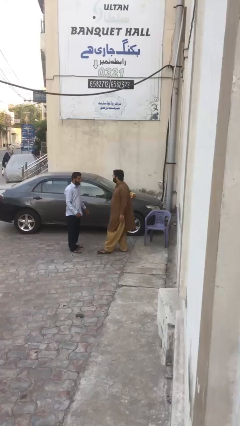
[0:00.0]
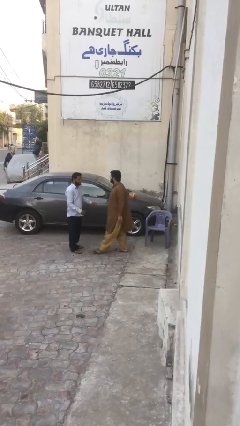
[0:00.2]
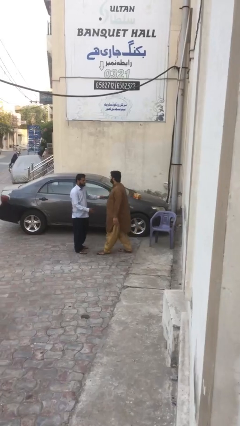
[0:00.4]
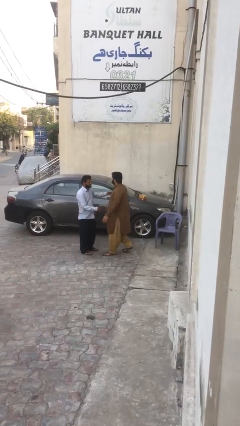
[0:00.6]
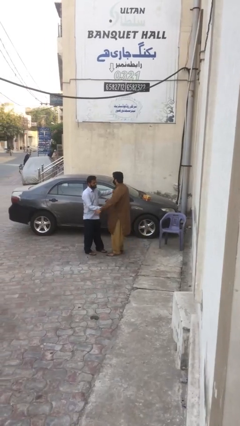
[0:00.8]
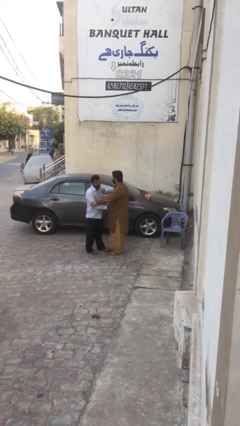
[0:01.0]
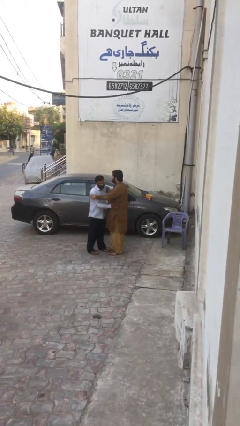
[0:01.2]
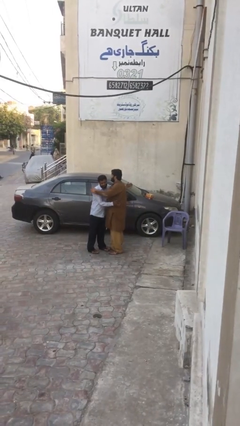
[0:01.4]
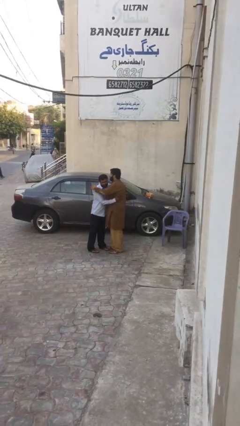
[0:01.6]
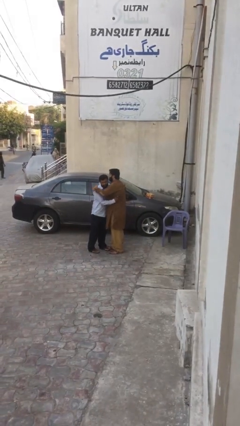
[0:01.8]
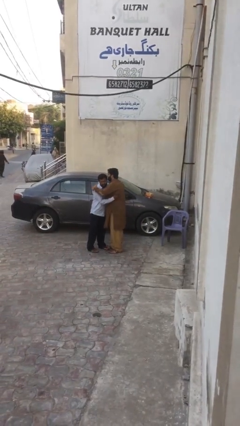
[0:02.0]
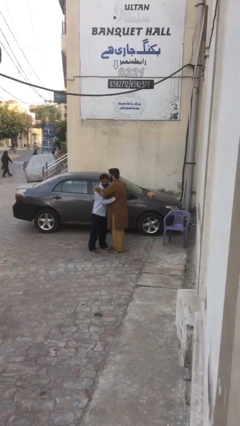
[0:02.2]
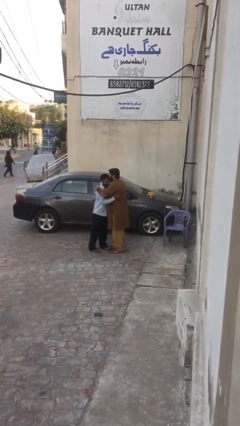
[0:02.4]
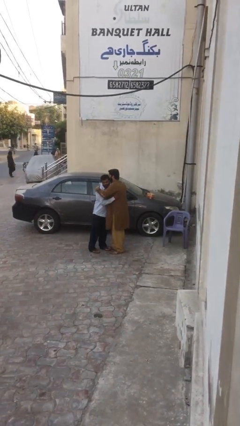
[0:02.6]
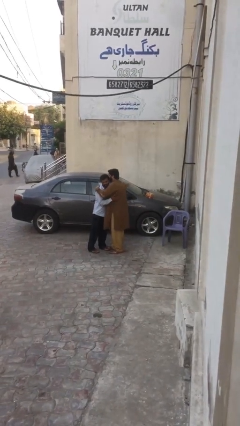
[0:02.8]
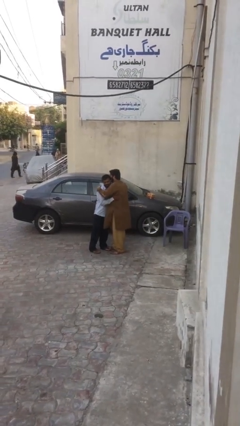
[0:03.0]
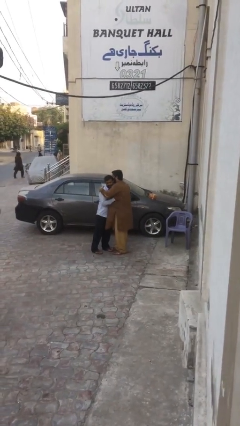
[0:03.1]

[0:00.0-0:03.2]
person embraces person

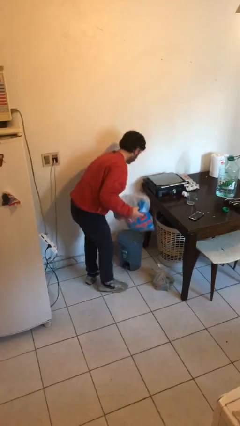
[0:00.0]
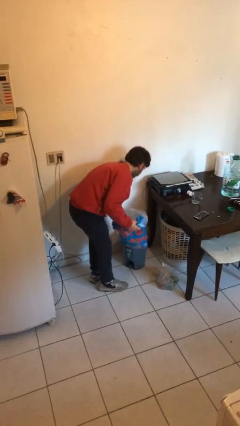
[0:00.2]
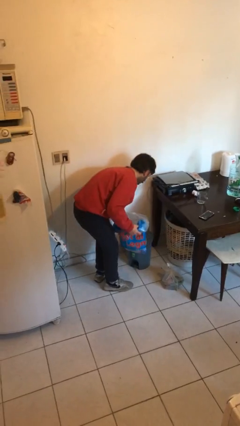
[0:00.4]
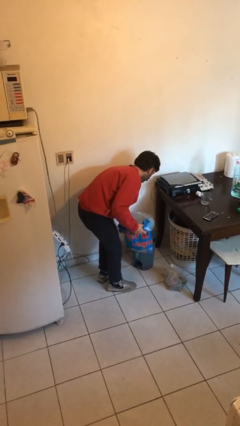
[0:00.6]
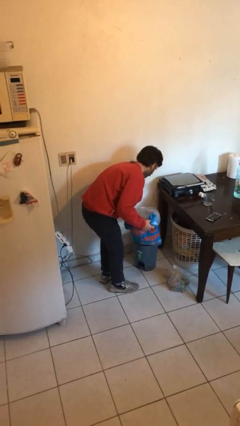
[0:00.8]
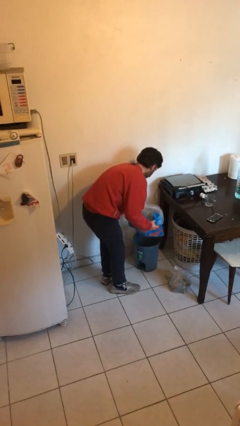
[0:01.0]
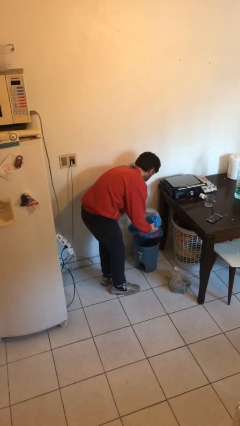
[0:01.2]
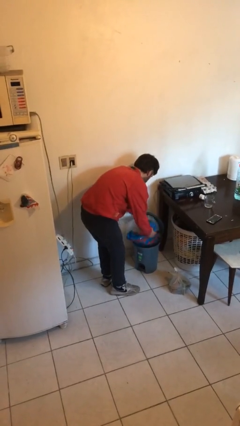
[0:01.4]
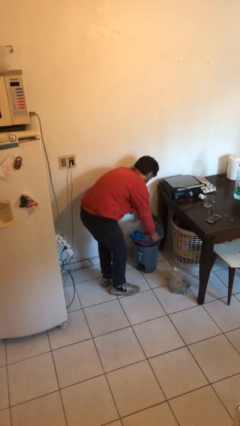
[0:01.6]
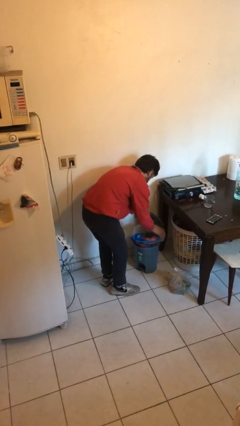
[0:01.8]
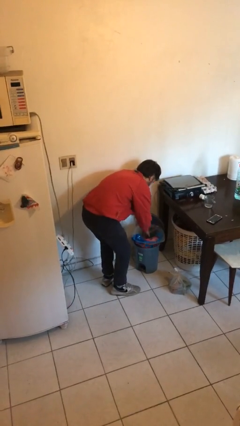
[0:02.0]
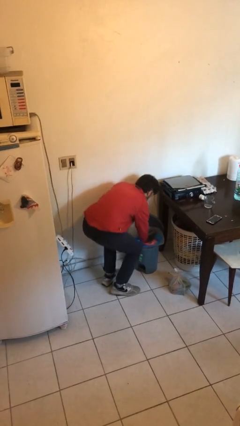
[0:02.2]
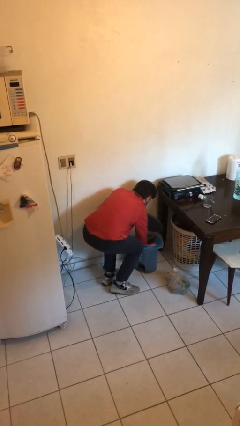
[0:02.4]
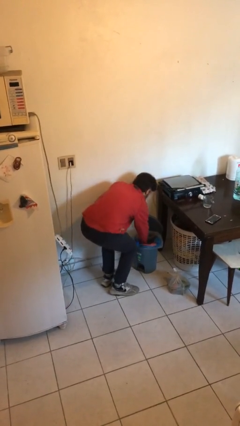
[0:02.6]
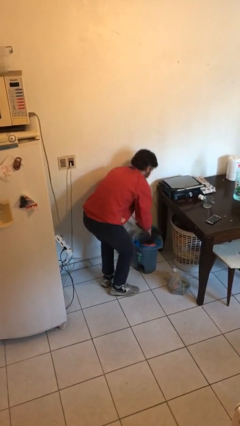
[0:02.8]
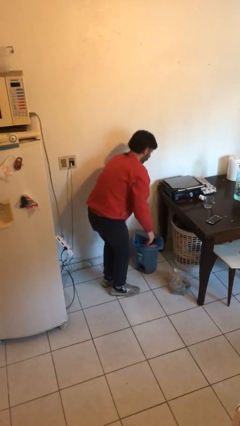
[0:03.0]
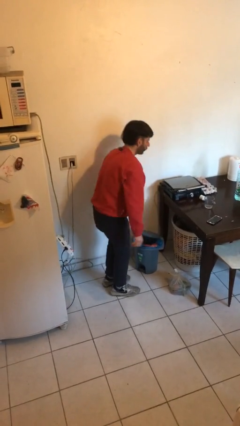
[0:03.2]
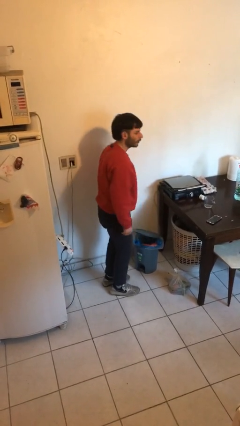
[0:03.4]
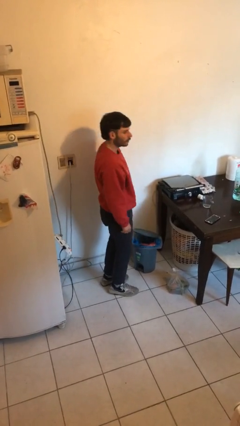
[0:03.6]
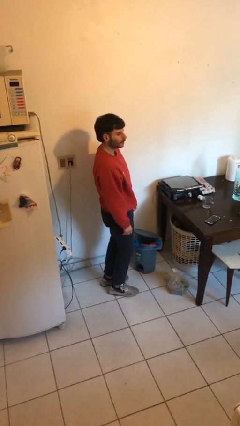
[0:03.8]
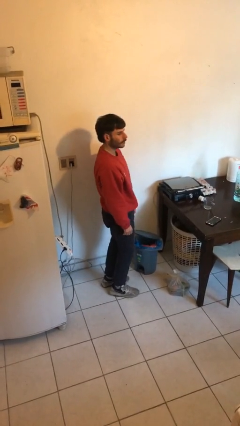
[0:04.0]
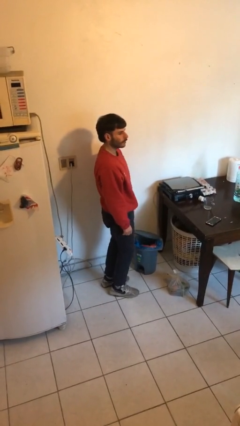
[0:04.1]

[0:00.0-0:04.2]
person inserts trashbag into trashcan

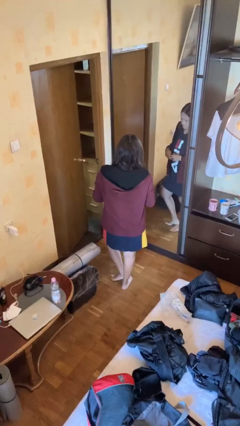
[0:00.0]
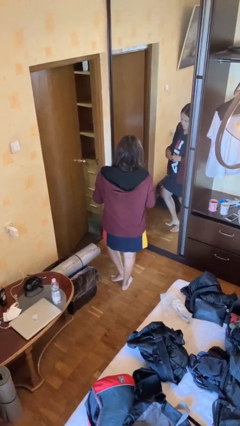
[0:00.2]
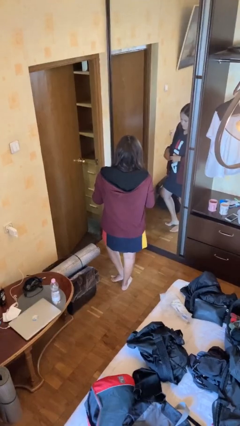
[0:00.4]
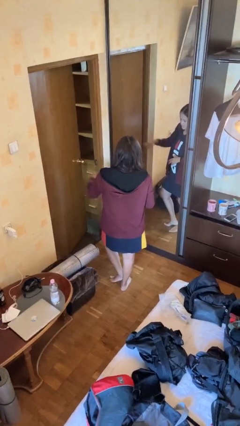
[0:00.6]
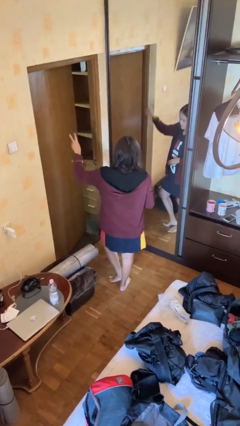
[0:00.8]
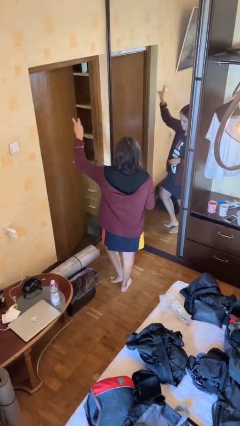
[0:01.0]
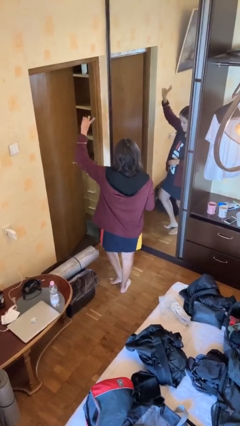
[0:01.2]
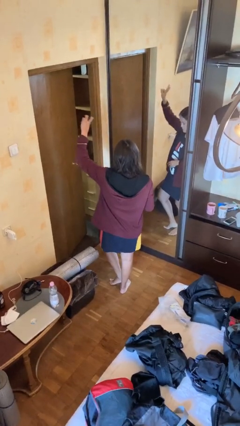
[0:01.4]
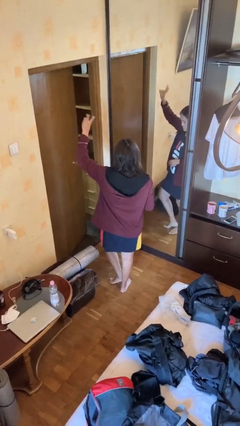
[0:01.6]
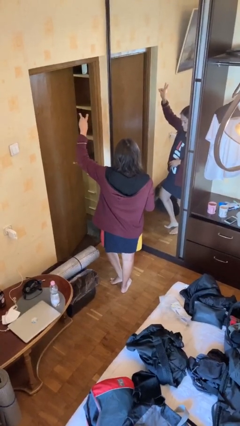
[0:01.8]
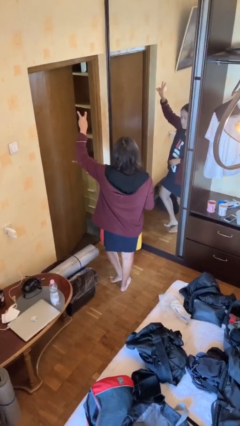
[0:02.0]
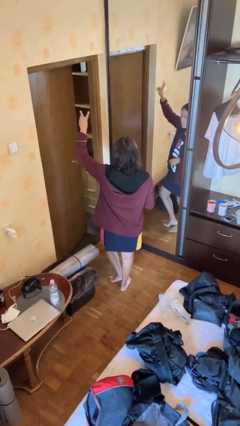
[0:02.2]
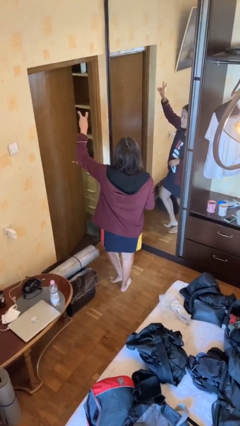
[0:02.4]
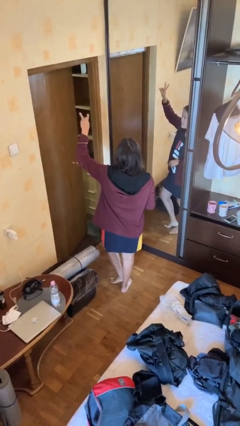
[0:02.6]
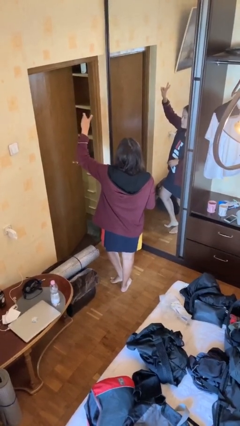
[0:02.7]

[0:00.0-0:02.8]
person gestures peace

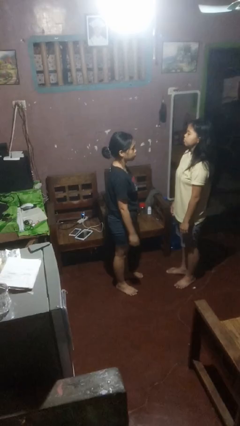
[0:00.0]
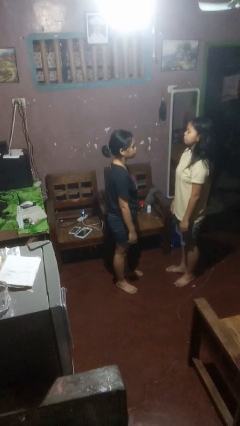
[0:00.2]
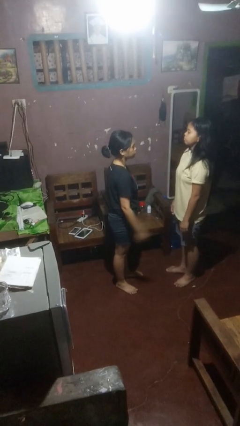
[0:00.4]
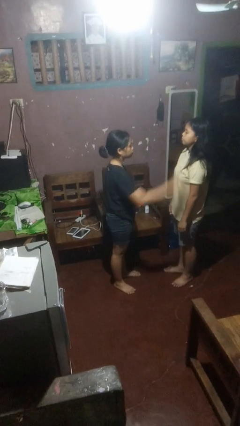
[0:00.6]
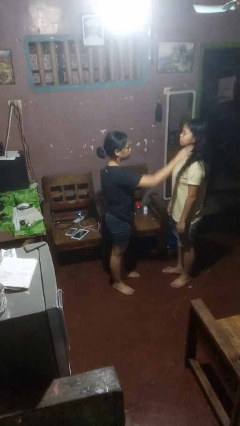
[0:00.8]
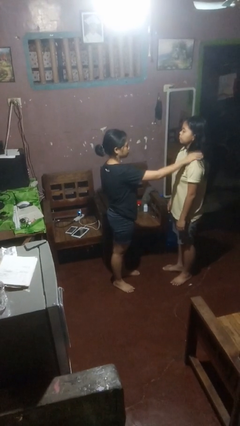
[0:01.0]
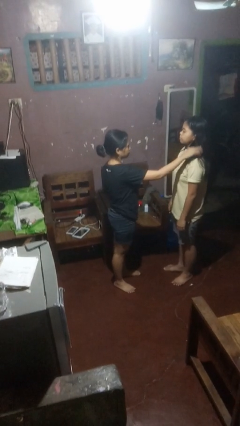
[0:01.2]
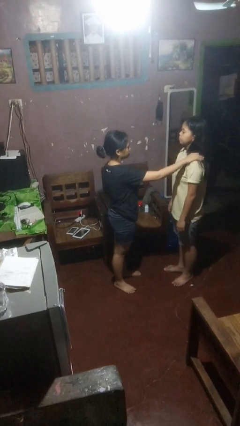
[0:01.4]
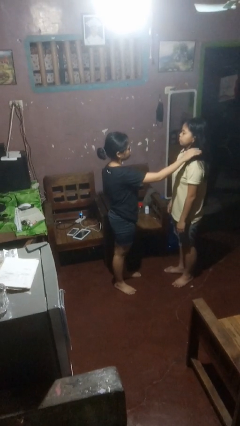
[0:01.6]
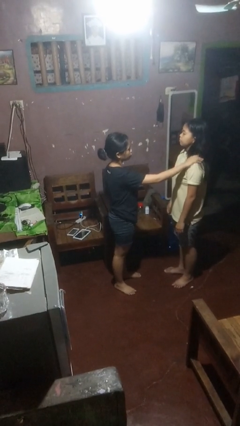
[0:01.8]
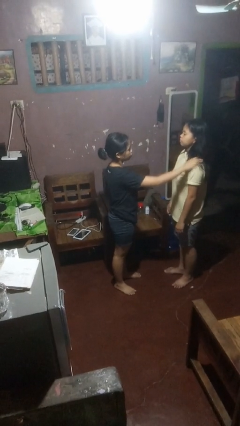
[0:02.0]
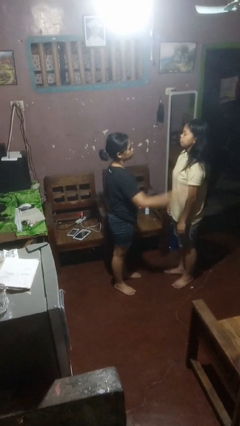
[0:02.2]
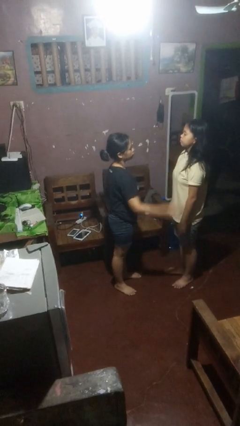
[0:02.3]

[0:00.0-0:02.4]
person pounds shoulders of person

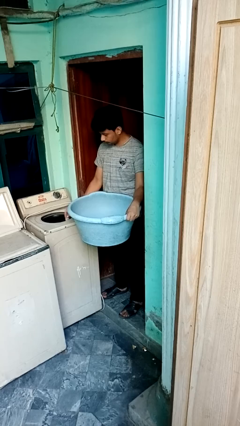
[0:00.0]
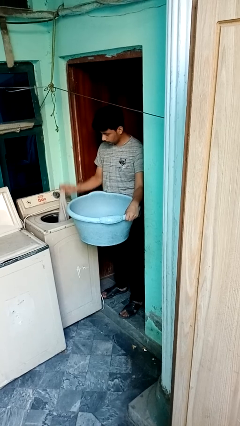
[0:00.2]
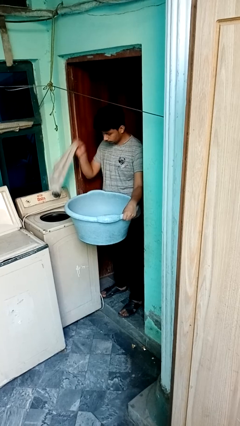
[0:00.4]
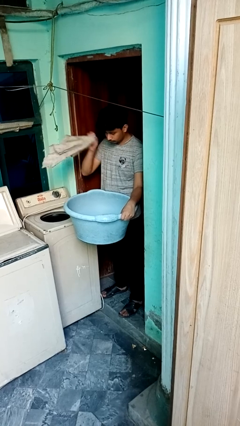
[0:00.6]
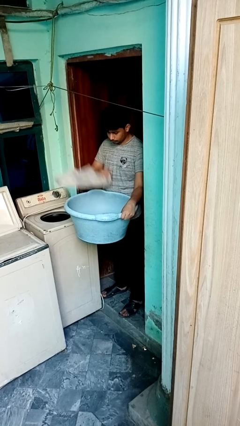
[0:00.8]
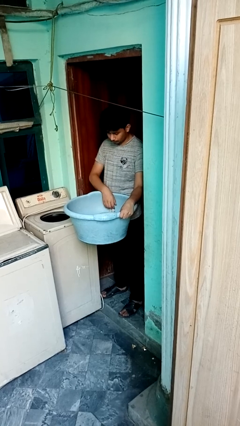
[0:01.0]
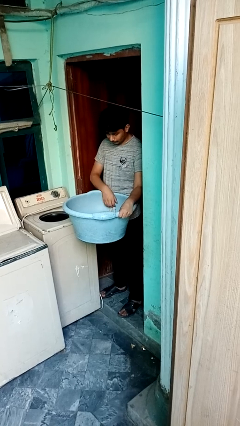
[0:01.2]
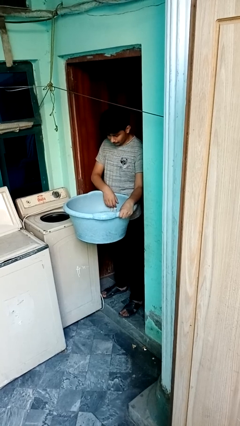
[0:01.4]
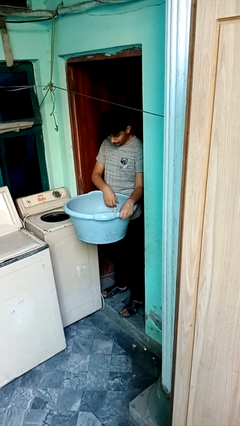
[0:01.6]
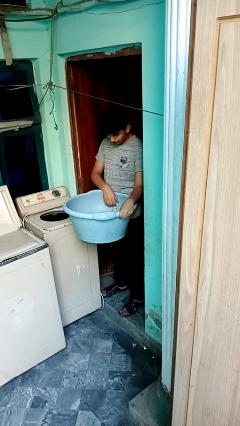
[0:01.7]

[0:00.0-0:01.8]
person unloads dryer

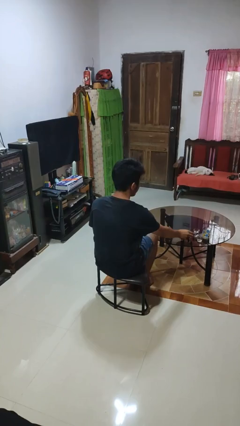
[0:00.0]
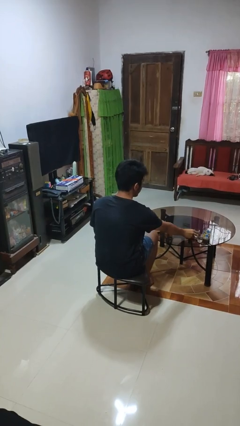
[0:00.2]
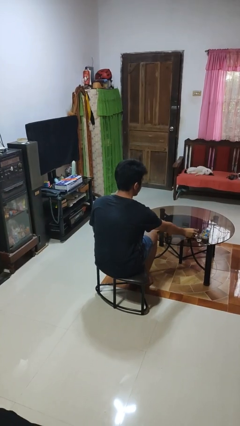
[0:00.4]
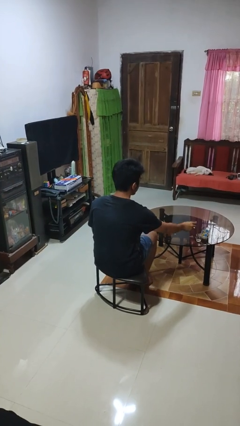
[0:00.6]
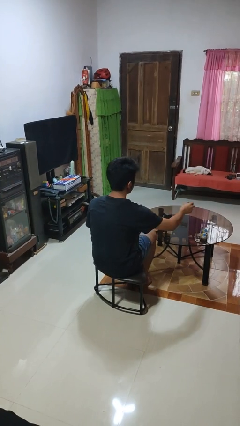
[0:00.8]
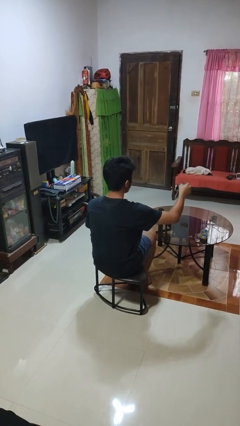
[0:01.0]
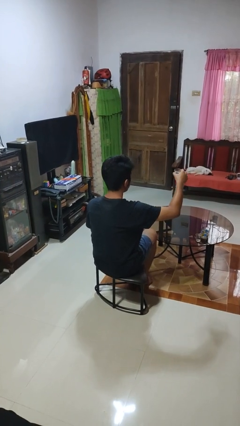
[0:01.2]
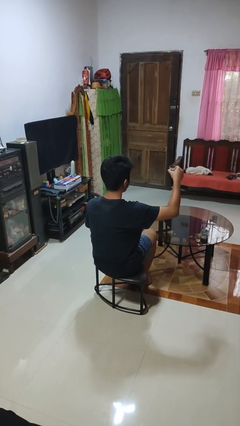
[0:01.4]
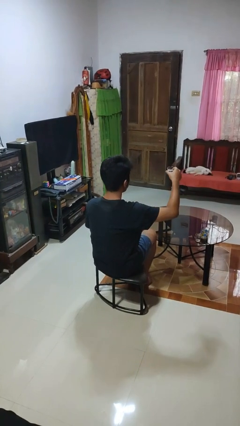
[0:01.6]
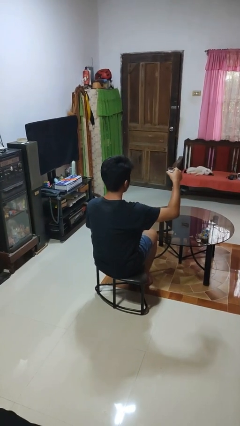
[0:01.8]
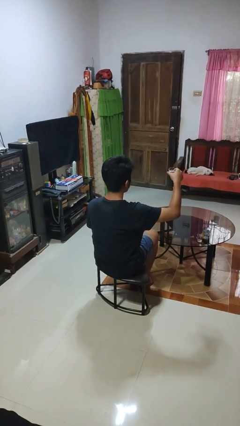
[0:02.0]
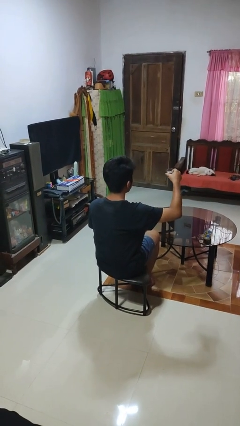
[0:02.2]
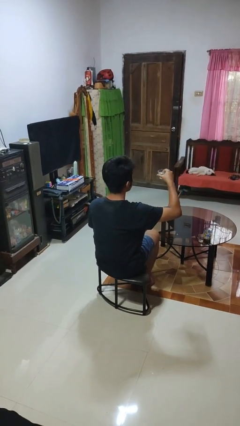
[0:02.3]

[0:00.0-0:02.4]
person picks up object from table

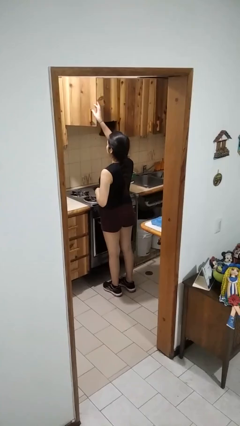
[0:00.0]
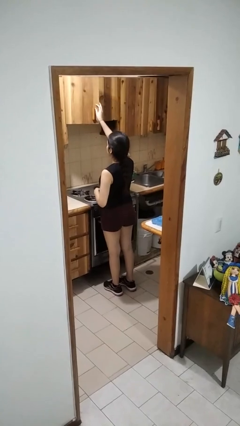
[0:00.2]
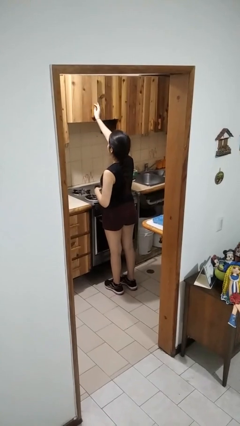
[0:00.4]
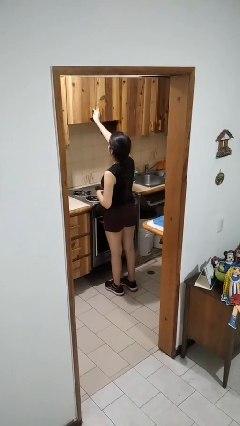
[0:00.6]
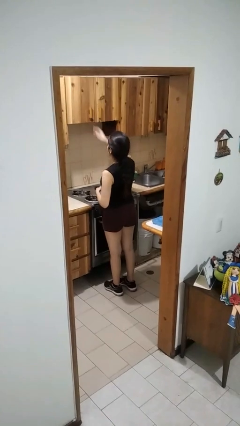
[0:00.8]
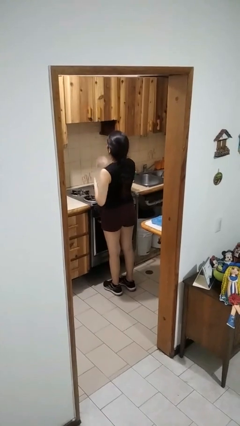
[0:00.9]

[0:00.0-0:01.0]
person closes cabinet
